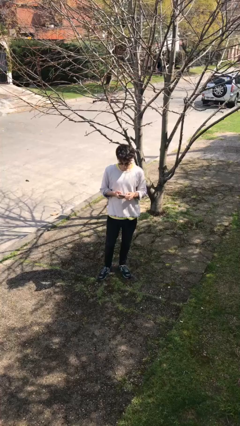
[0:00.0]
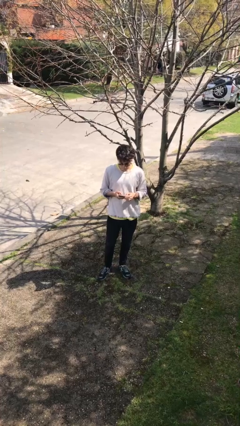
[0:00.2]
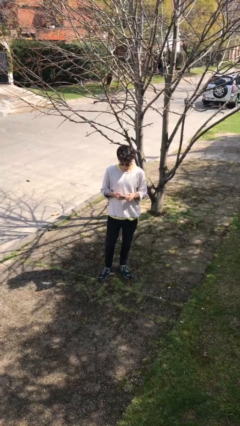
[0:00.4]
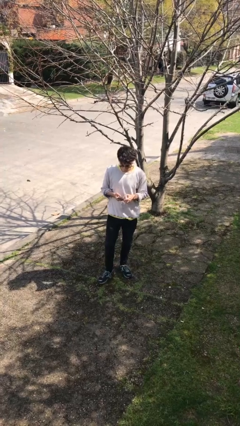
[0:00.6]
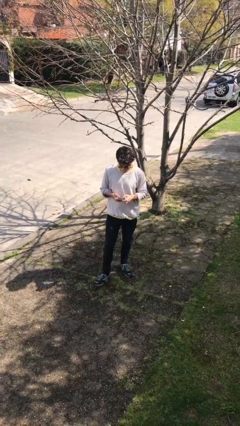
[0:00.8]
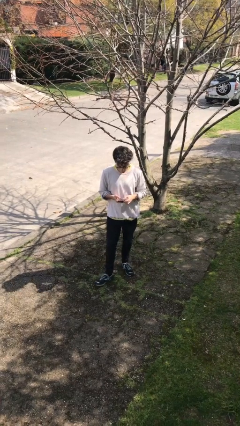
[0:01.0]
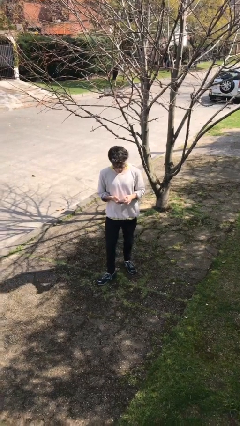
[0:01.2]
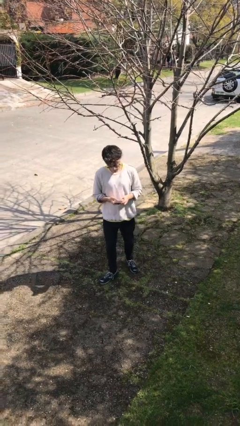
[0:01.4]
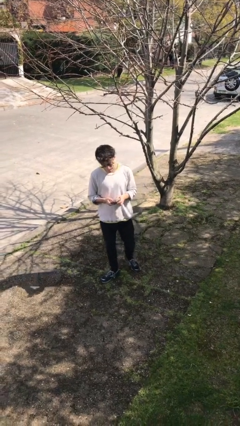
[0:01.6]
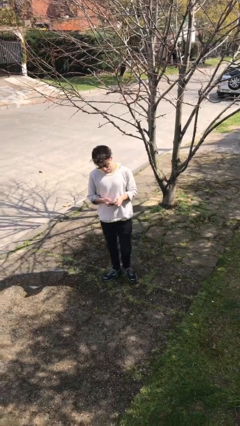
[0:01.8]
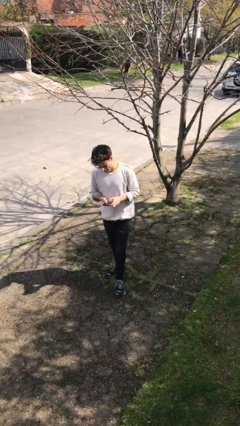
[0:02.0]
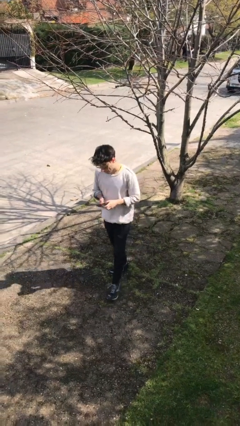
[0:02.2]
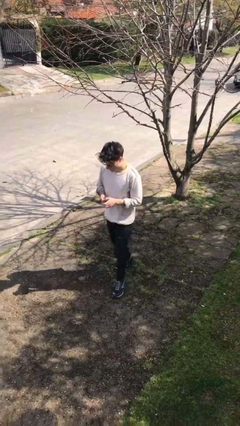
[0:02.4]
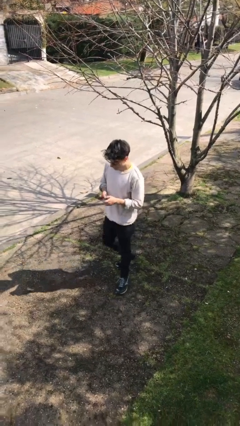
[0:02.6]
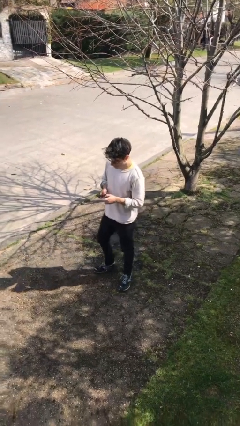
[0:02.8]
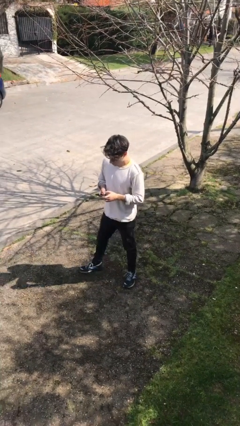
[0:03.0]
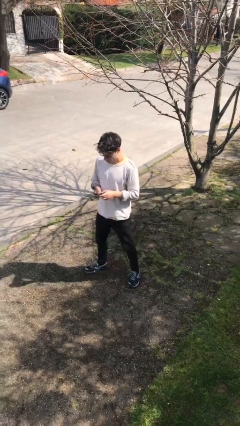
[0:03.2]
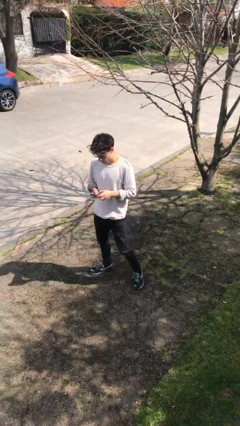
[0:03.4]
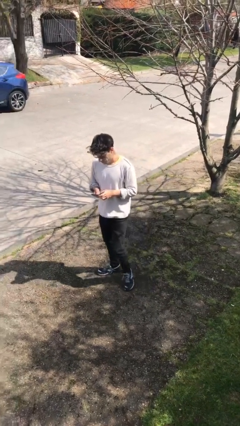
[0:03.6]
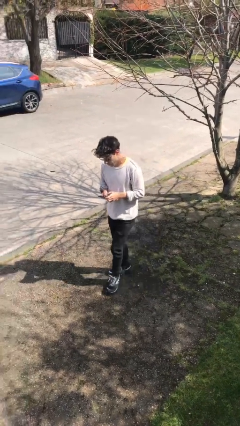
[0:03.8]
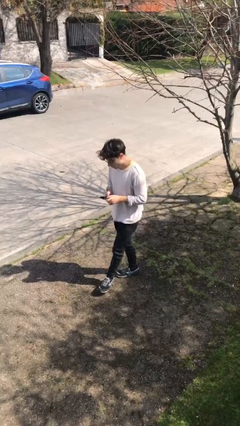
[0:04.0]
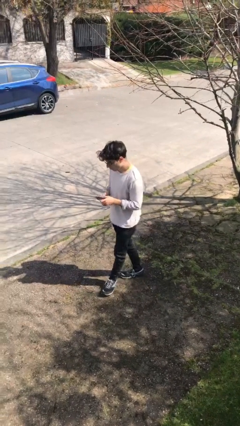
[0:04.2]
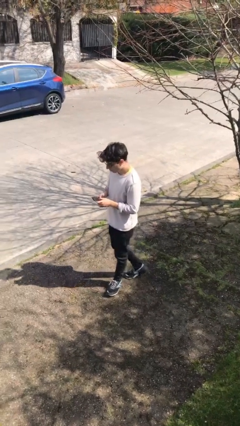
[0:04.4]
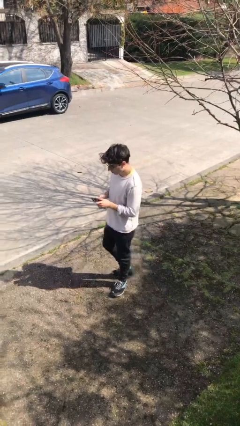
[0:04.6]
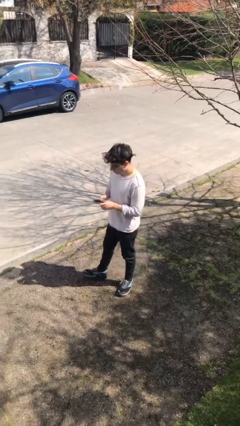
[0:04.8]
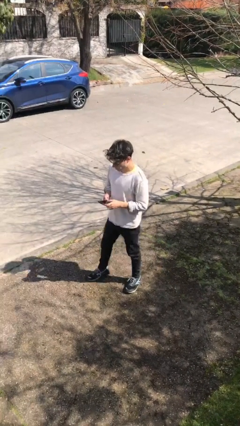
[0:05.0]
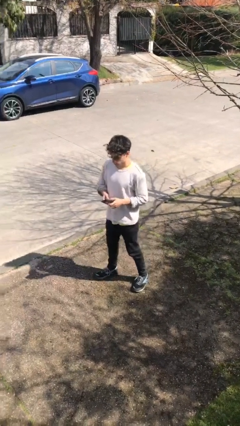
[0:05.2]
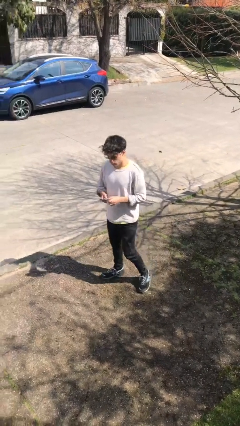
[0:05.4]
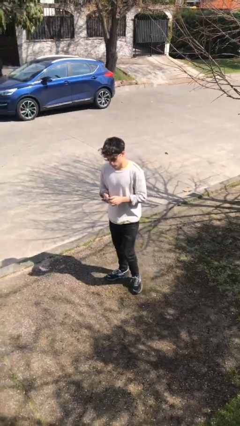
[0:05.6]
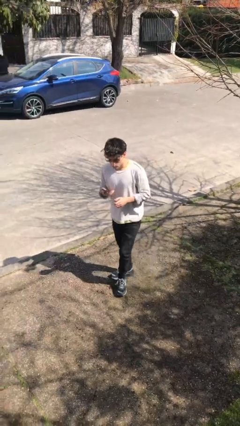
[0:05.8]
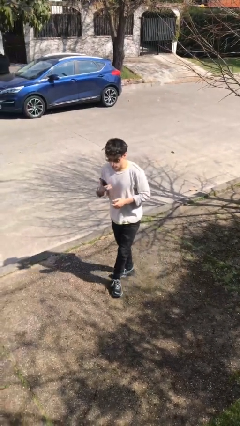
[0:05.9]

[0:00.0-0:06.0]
person texts on phone

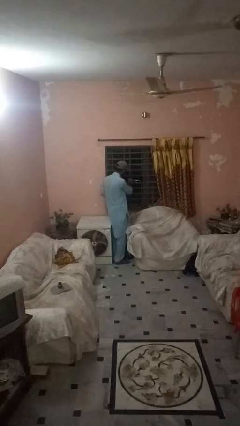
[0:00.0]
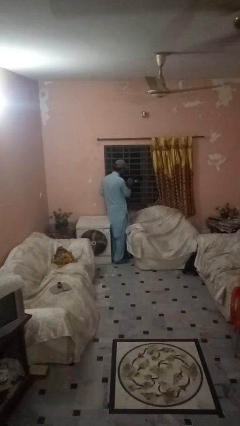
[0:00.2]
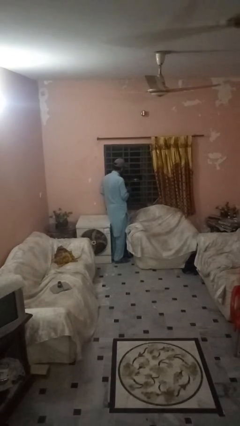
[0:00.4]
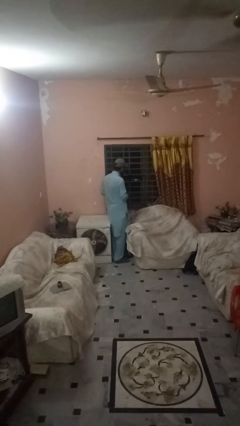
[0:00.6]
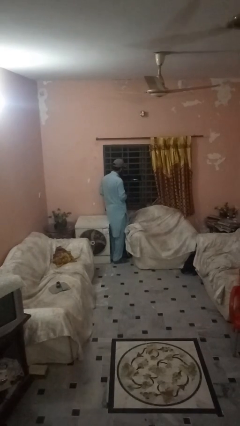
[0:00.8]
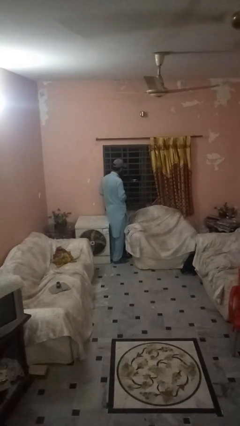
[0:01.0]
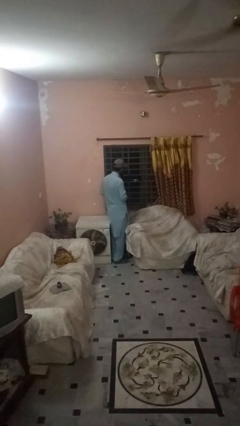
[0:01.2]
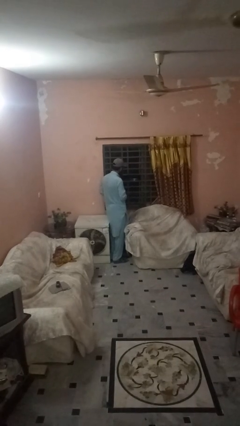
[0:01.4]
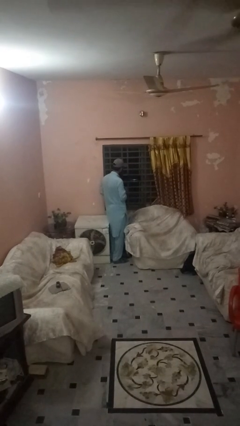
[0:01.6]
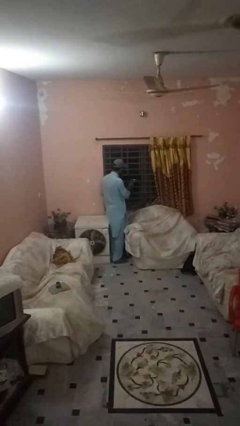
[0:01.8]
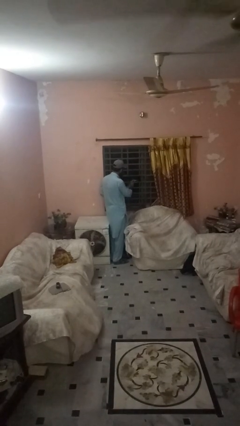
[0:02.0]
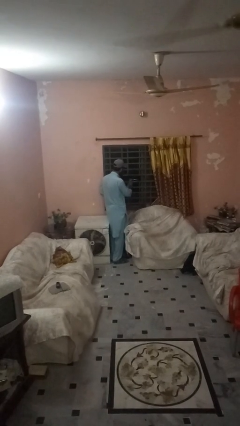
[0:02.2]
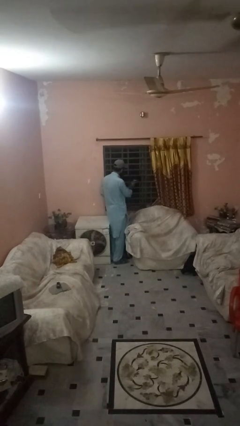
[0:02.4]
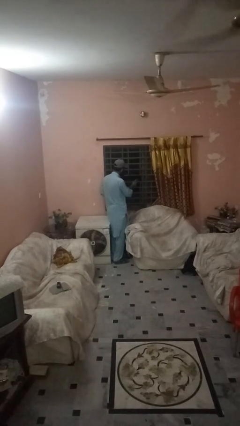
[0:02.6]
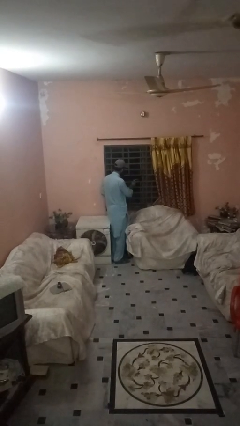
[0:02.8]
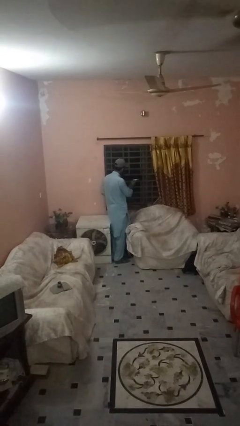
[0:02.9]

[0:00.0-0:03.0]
person sprays from bottle

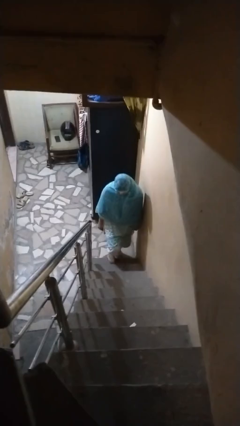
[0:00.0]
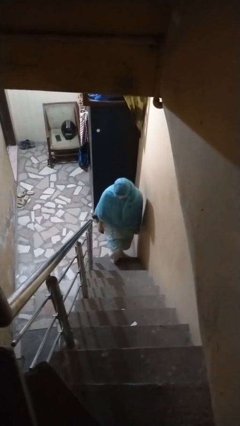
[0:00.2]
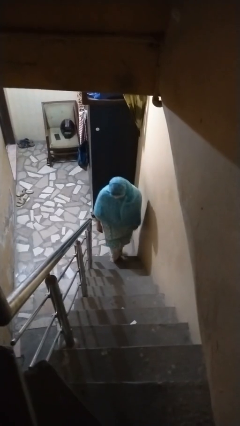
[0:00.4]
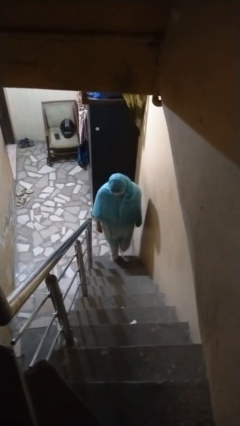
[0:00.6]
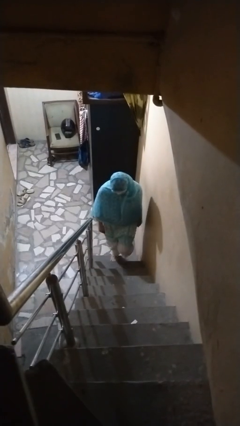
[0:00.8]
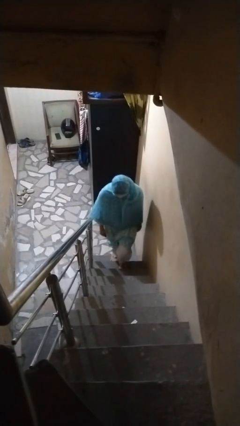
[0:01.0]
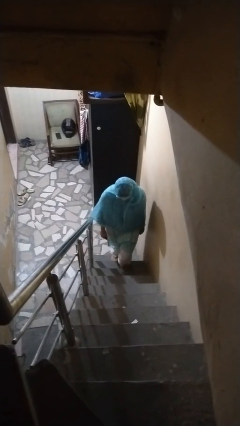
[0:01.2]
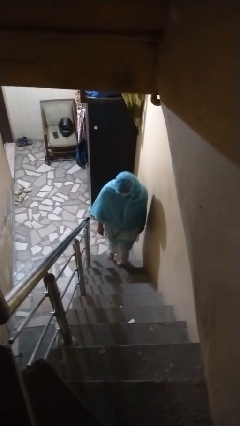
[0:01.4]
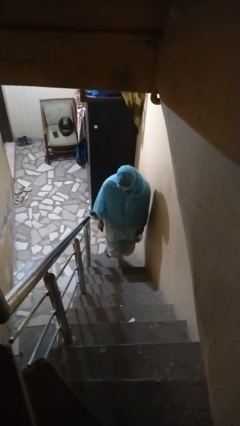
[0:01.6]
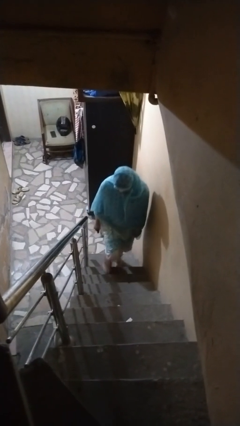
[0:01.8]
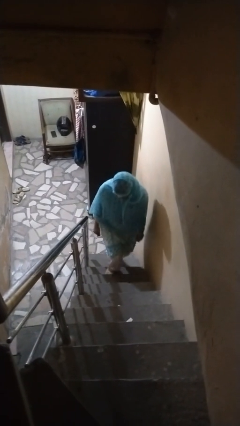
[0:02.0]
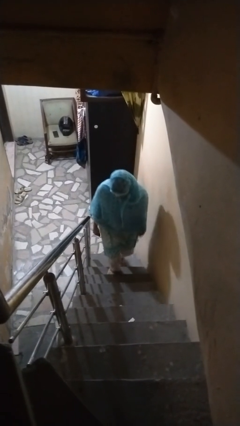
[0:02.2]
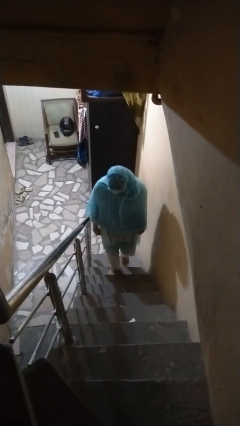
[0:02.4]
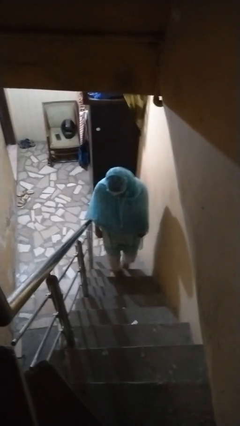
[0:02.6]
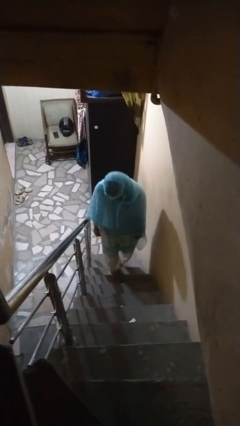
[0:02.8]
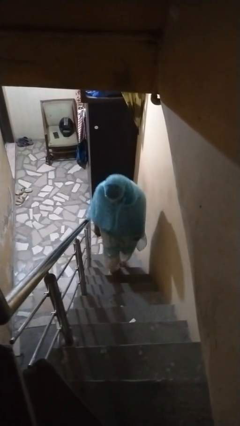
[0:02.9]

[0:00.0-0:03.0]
person climbs up stairs

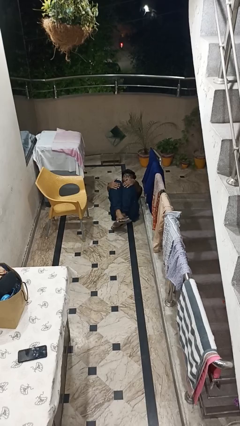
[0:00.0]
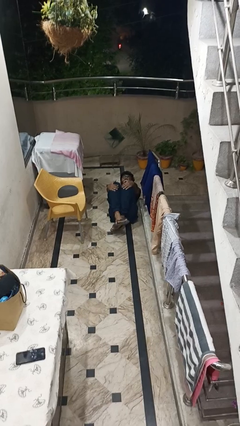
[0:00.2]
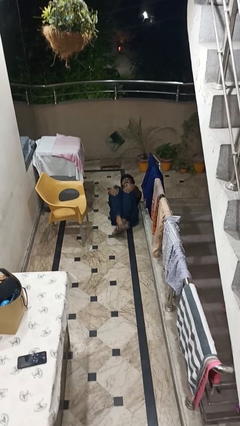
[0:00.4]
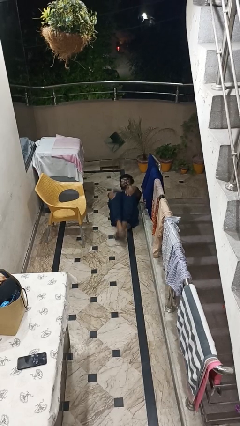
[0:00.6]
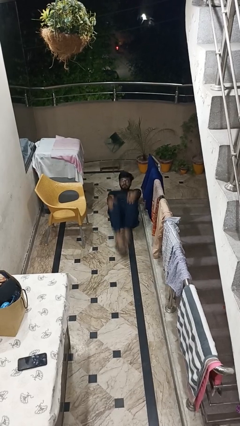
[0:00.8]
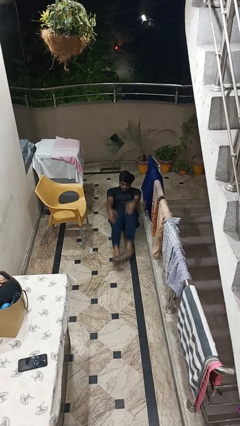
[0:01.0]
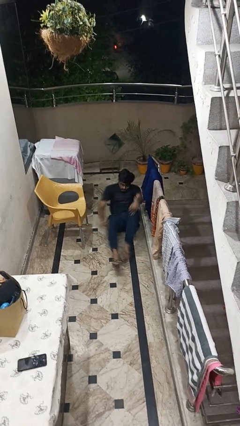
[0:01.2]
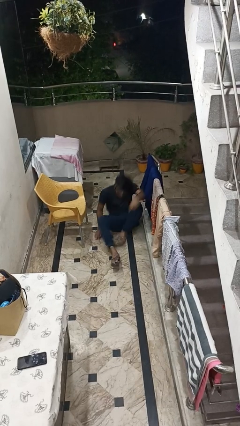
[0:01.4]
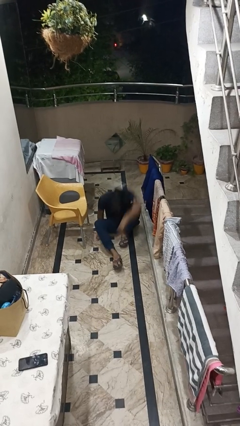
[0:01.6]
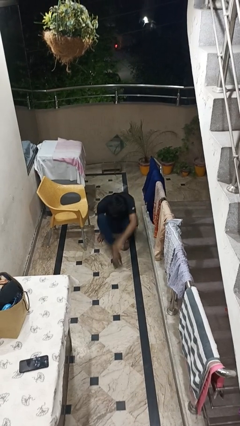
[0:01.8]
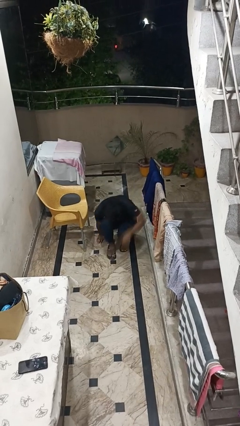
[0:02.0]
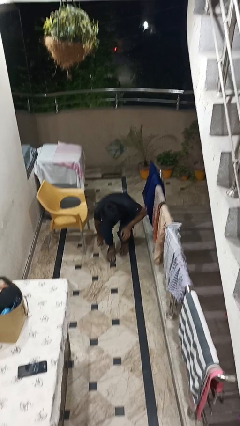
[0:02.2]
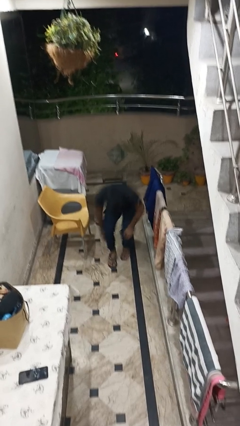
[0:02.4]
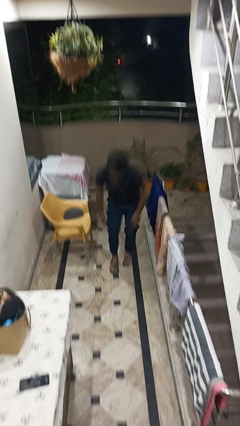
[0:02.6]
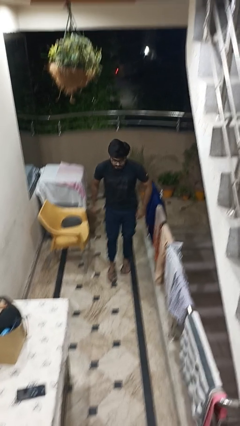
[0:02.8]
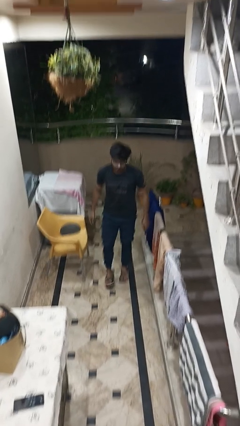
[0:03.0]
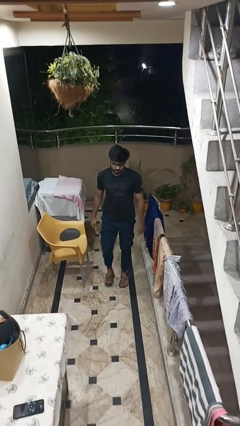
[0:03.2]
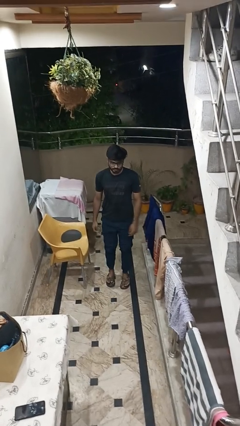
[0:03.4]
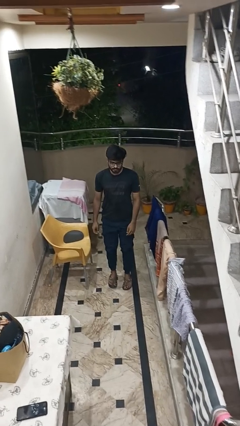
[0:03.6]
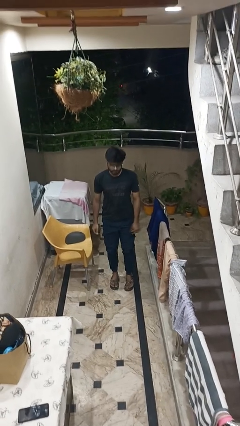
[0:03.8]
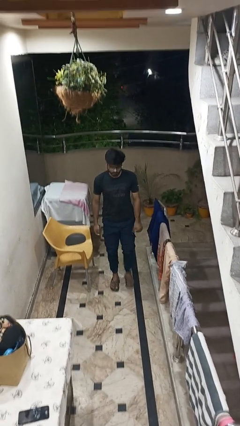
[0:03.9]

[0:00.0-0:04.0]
person stands up from floor

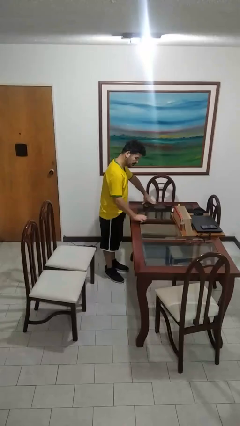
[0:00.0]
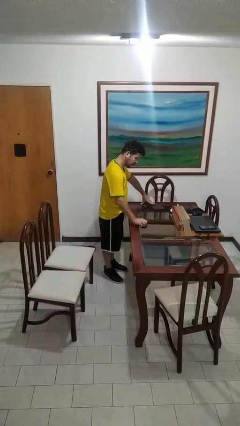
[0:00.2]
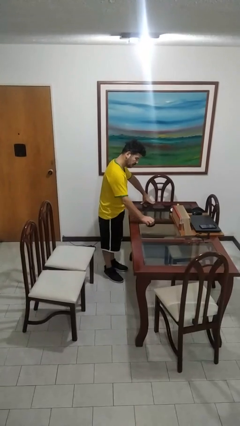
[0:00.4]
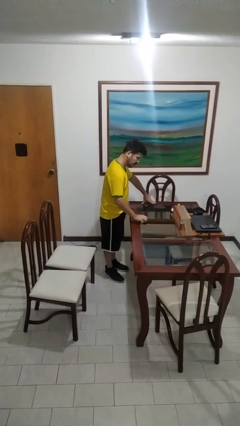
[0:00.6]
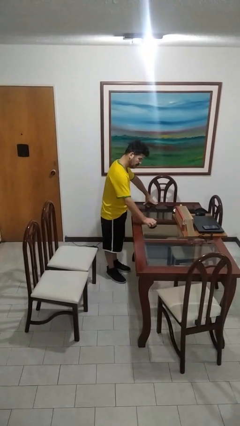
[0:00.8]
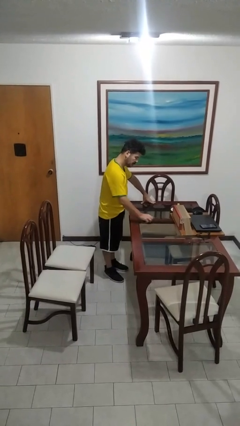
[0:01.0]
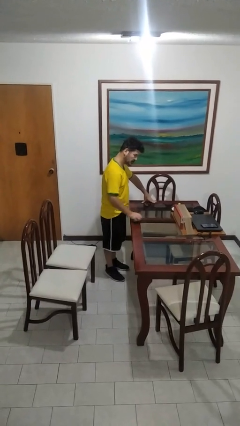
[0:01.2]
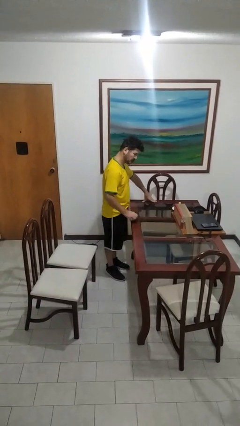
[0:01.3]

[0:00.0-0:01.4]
person cleans table with rag

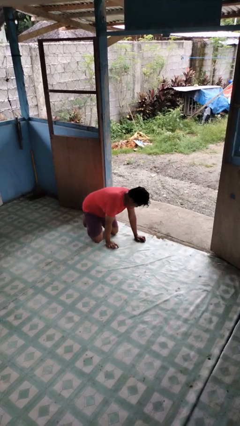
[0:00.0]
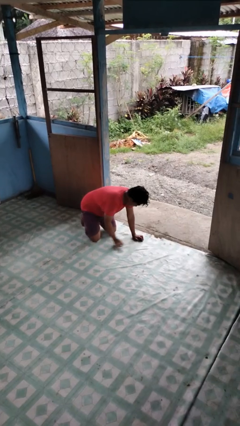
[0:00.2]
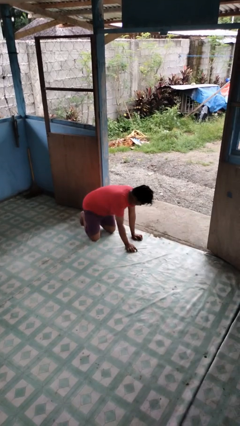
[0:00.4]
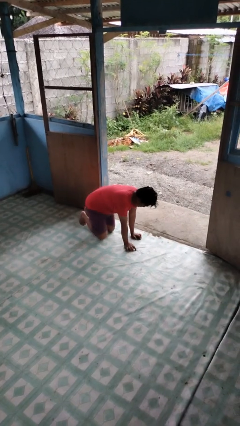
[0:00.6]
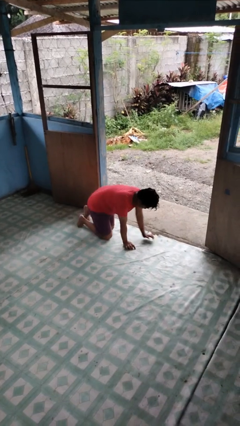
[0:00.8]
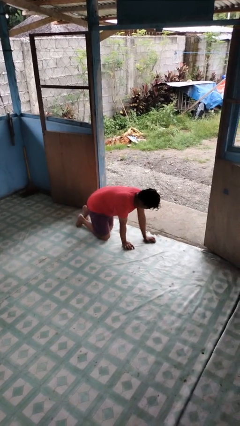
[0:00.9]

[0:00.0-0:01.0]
person crawls
